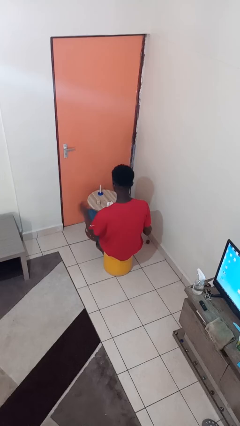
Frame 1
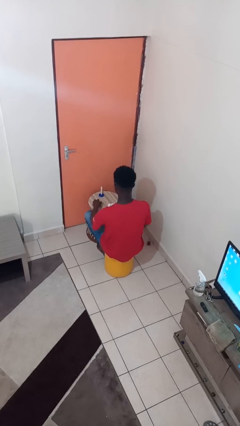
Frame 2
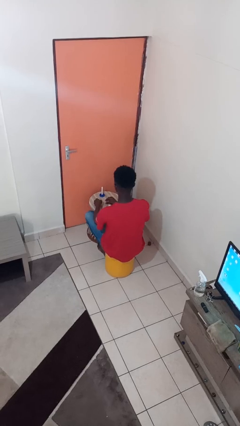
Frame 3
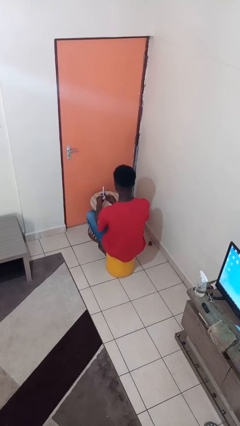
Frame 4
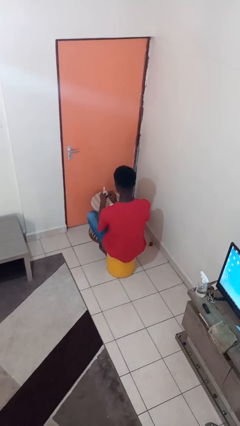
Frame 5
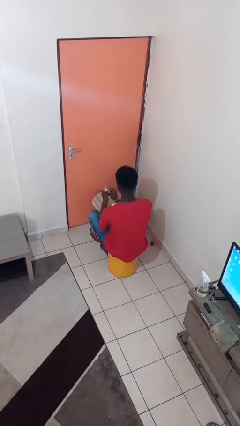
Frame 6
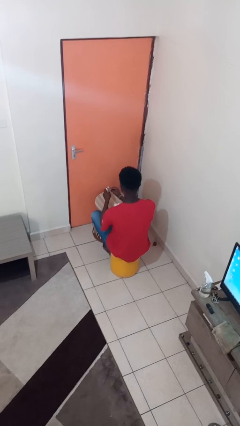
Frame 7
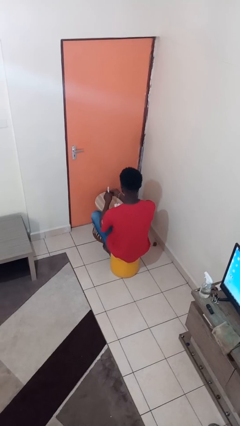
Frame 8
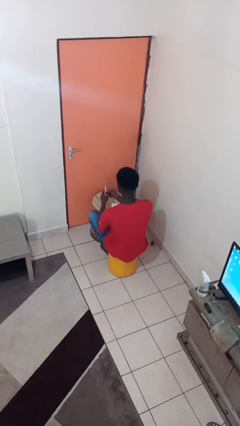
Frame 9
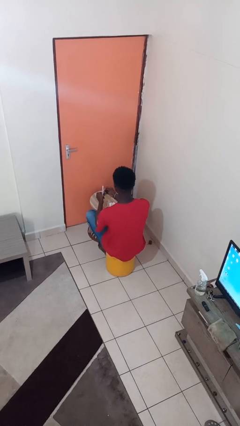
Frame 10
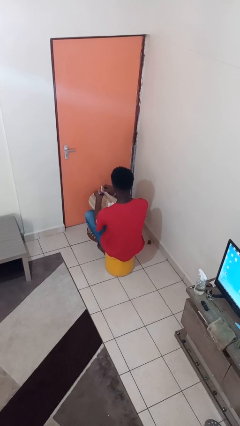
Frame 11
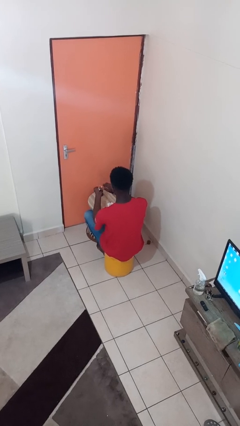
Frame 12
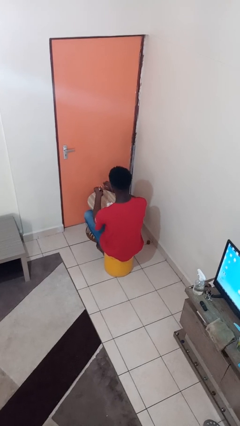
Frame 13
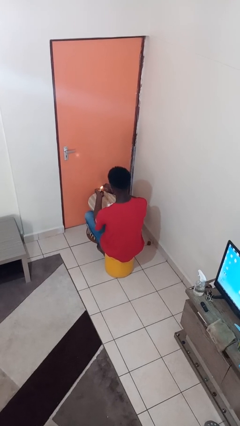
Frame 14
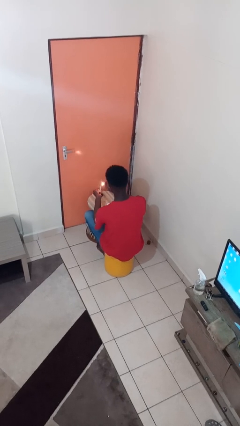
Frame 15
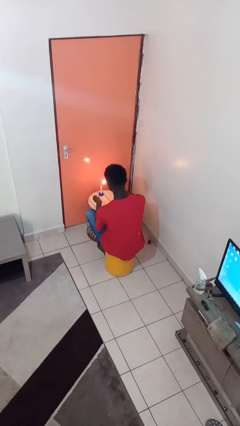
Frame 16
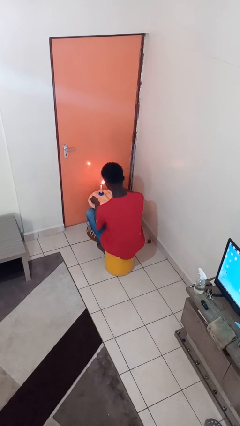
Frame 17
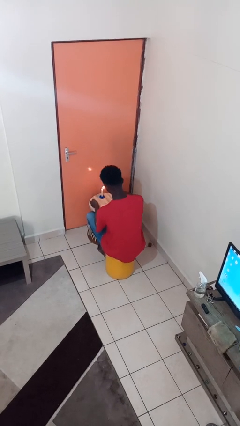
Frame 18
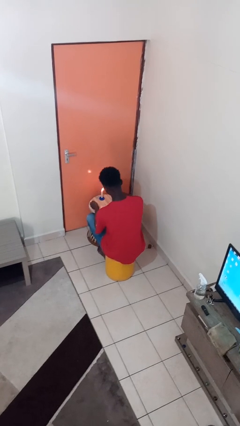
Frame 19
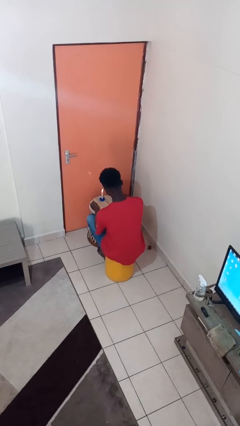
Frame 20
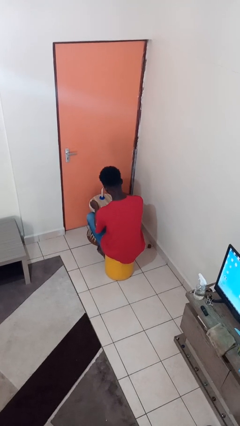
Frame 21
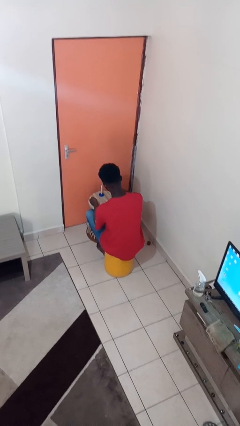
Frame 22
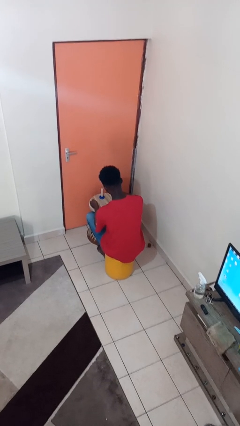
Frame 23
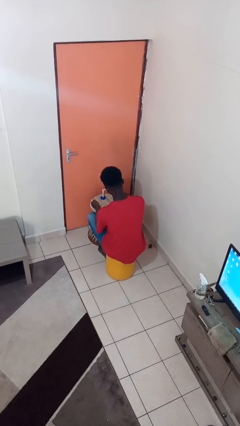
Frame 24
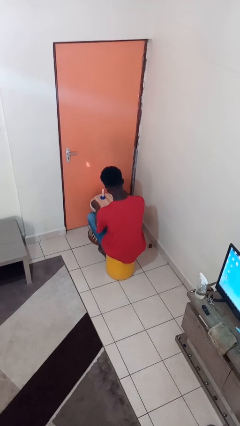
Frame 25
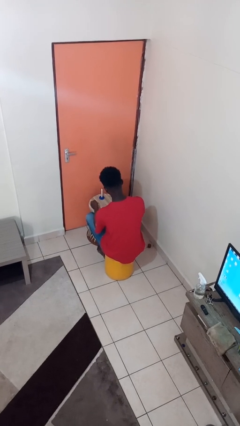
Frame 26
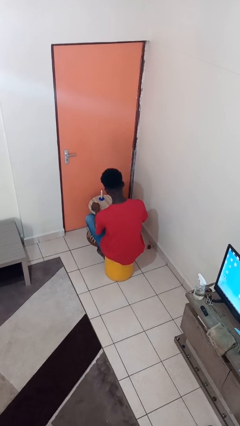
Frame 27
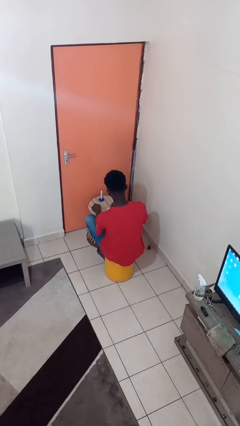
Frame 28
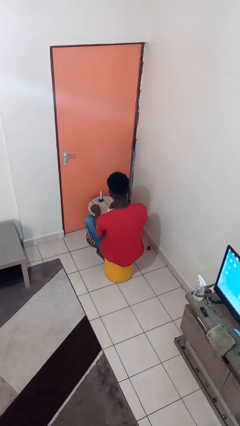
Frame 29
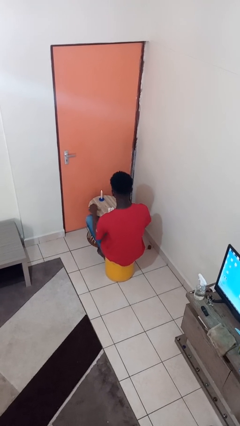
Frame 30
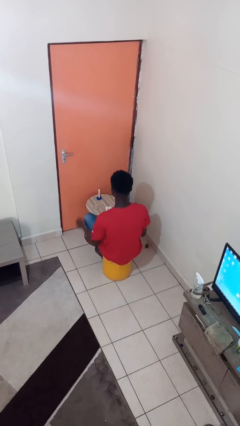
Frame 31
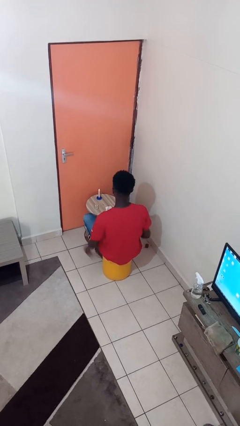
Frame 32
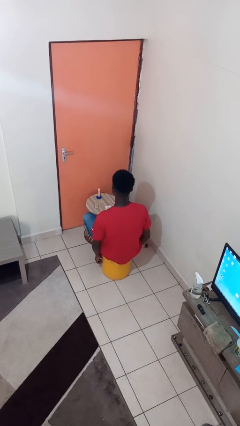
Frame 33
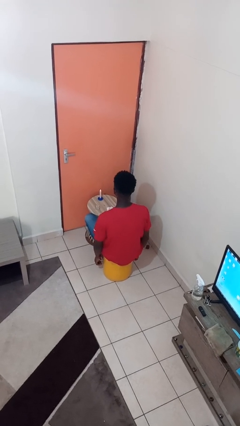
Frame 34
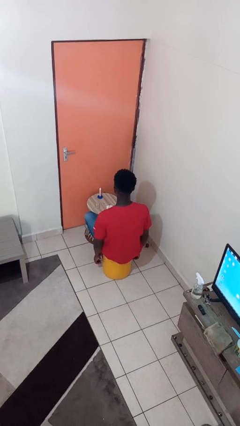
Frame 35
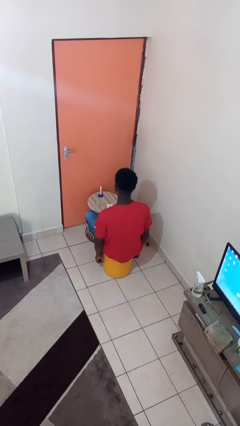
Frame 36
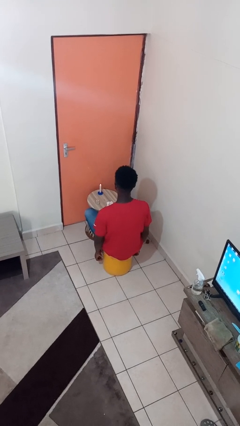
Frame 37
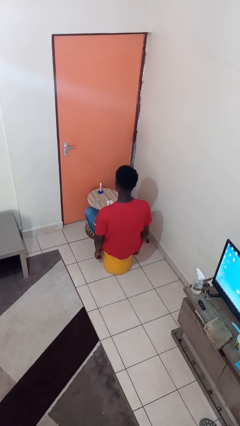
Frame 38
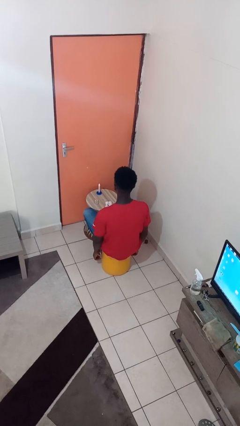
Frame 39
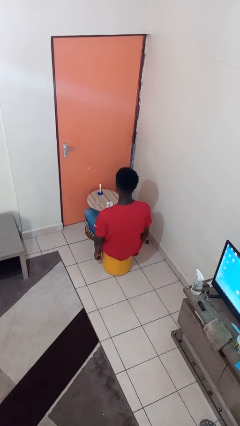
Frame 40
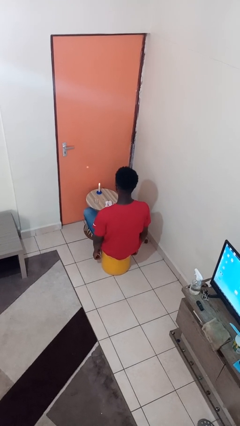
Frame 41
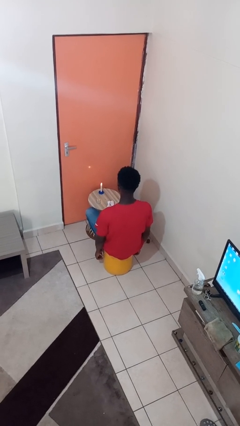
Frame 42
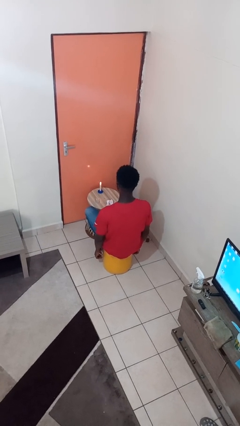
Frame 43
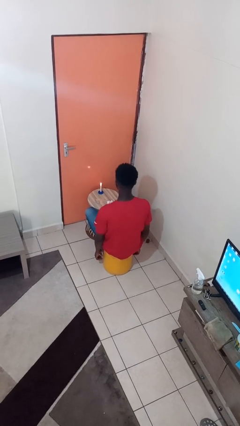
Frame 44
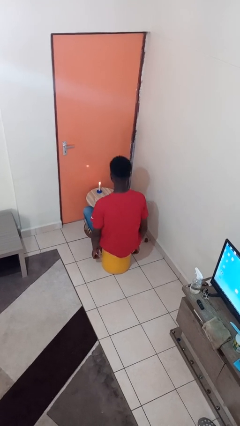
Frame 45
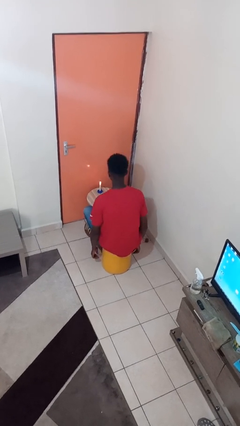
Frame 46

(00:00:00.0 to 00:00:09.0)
person lights candle

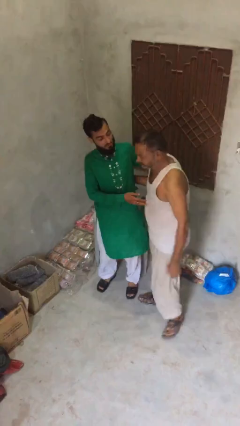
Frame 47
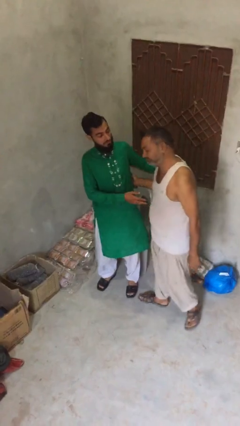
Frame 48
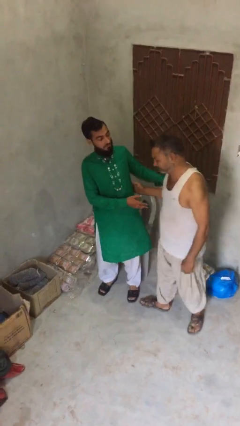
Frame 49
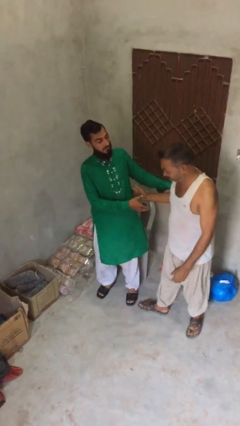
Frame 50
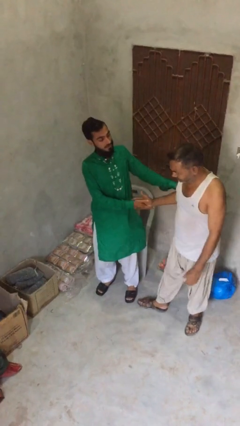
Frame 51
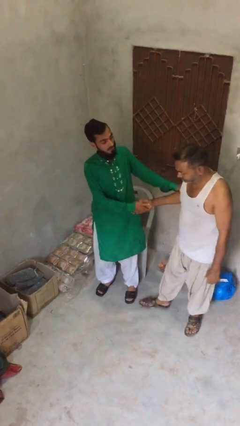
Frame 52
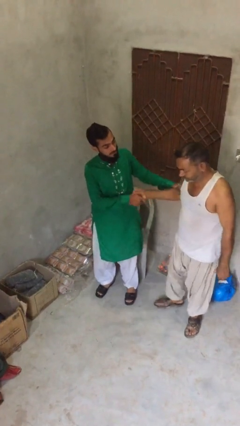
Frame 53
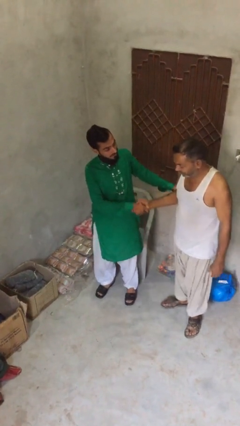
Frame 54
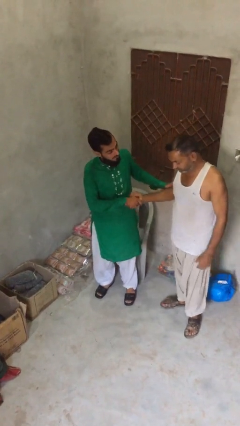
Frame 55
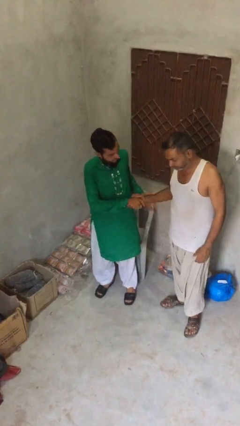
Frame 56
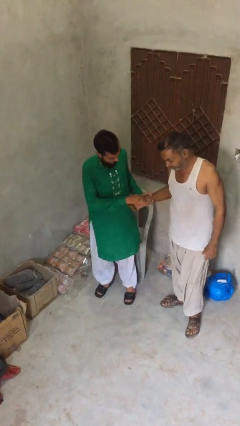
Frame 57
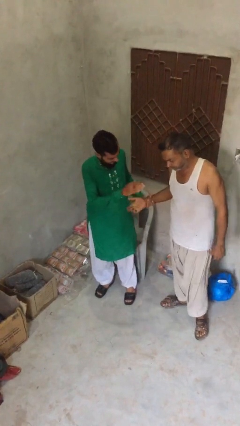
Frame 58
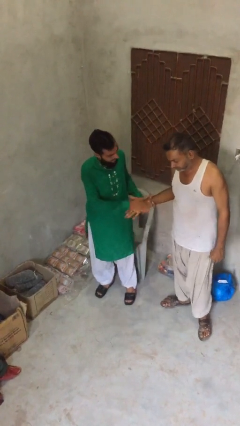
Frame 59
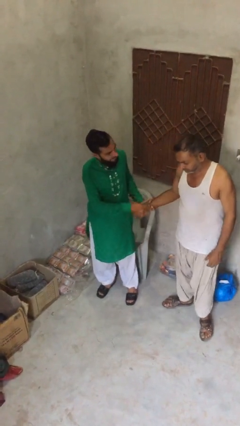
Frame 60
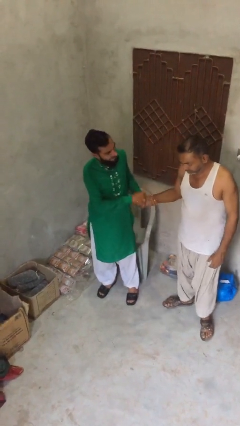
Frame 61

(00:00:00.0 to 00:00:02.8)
person talks to person

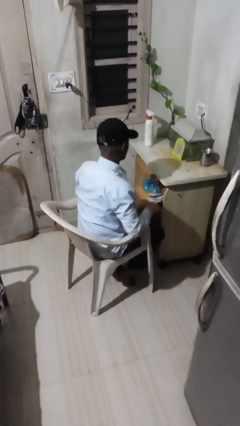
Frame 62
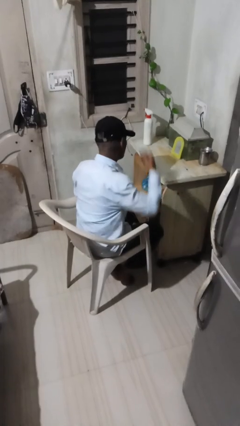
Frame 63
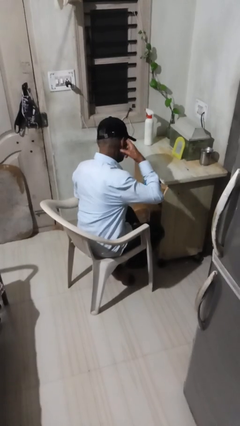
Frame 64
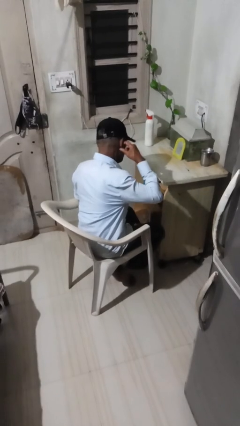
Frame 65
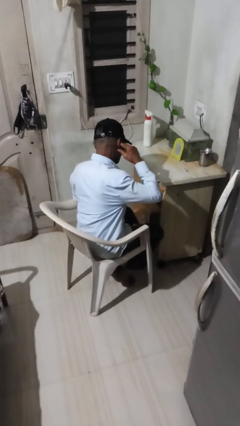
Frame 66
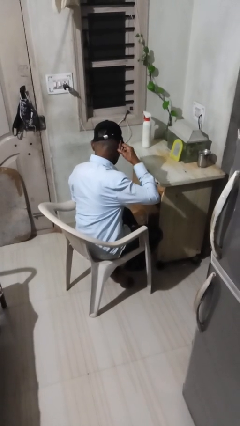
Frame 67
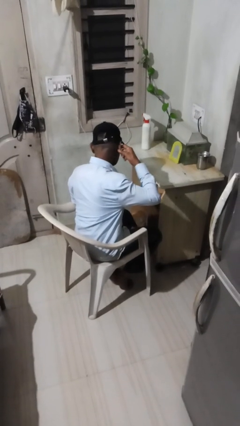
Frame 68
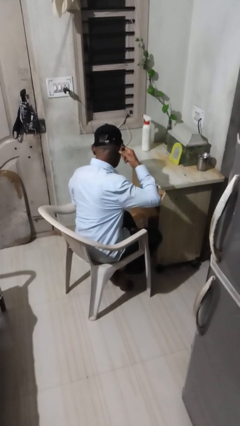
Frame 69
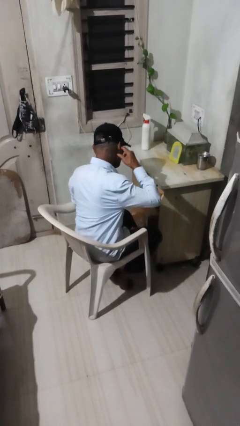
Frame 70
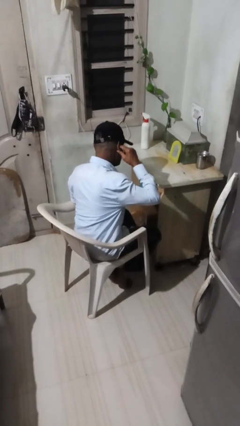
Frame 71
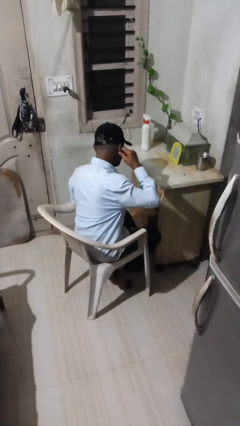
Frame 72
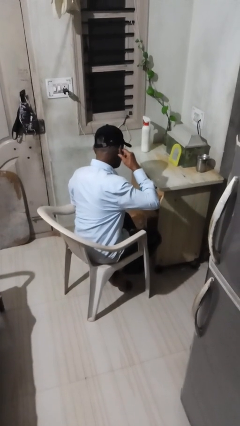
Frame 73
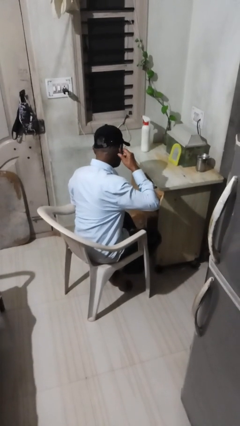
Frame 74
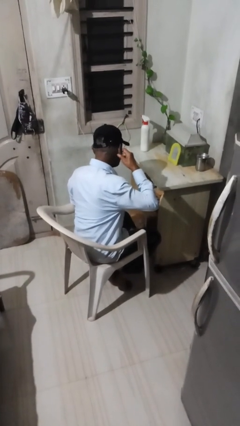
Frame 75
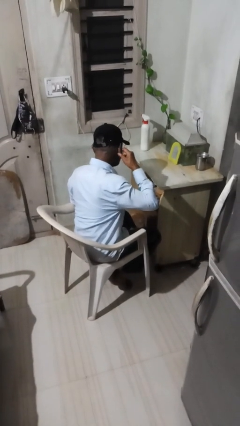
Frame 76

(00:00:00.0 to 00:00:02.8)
person puts fingers in ear

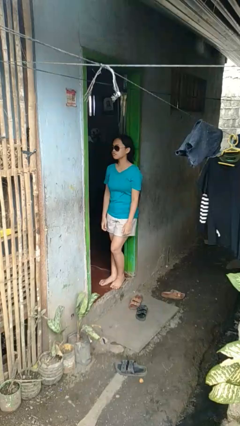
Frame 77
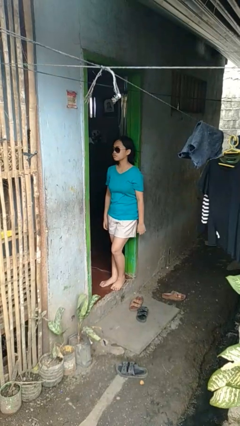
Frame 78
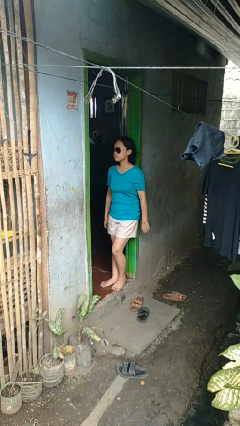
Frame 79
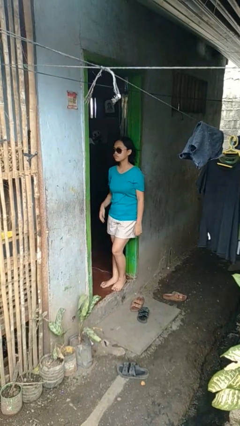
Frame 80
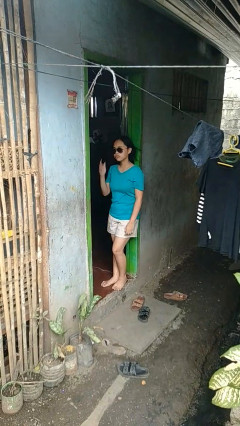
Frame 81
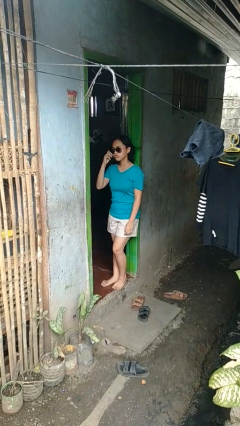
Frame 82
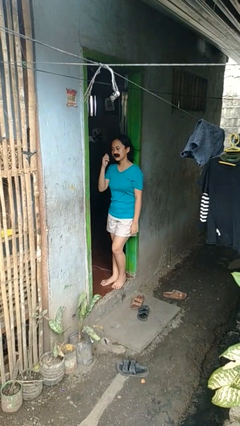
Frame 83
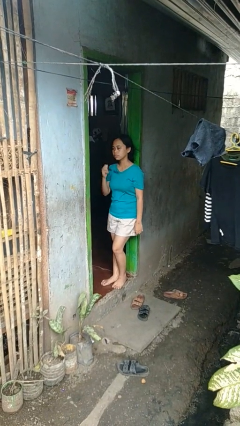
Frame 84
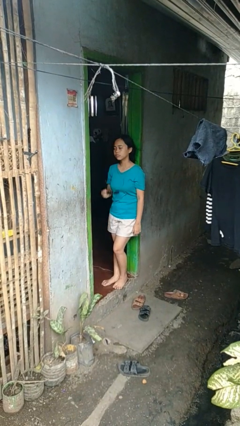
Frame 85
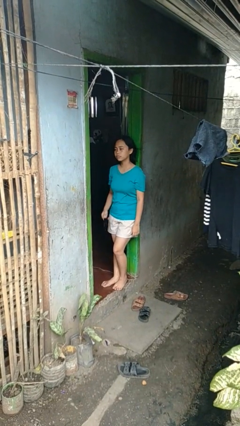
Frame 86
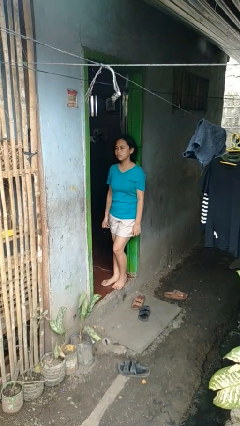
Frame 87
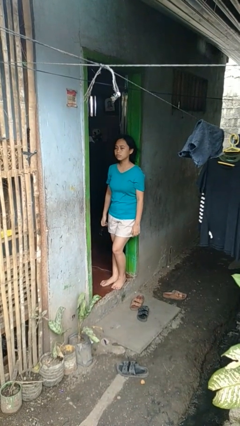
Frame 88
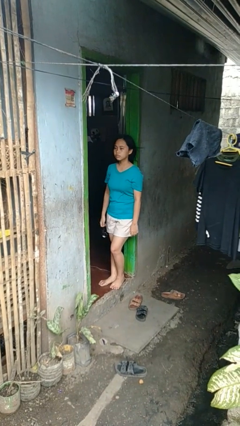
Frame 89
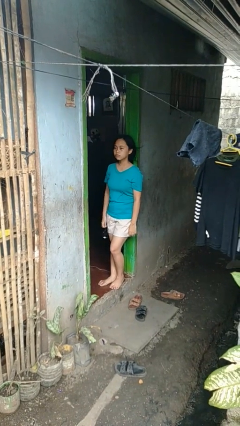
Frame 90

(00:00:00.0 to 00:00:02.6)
person takes off sunglasses

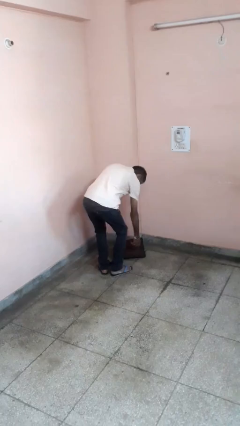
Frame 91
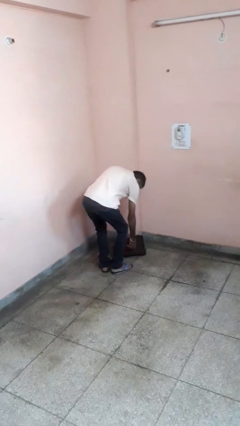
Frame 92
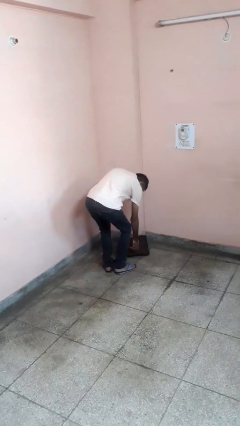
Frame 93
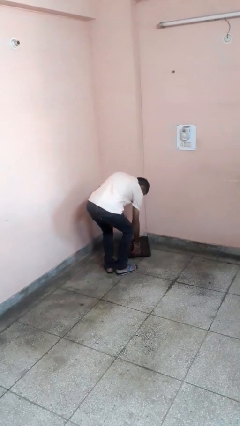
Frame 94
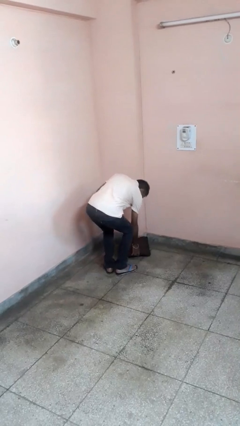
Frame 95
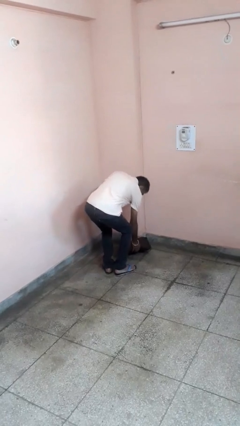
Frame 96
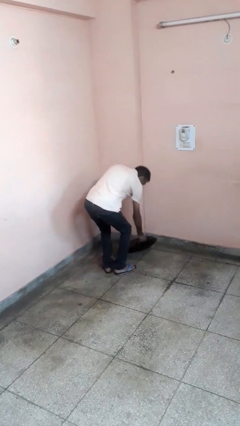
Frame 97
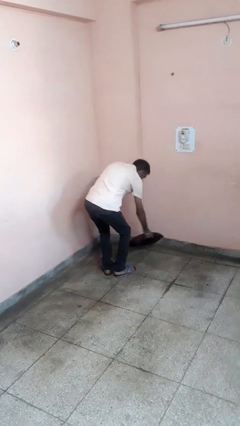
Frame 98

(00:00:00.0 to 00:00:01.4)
person picks up object from floor
